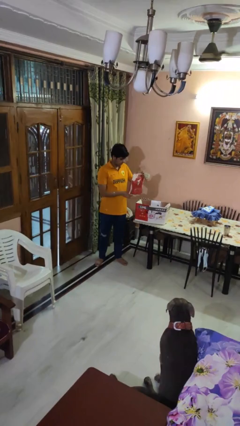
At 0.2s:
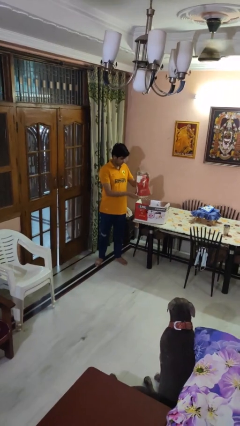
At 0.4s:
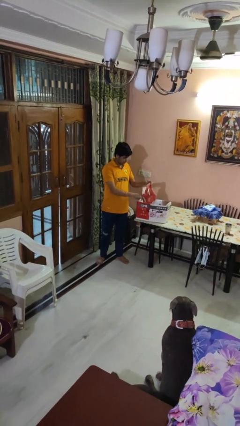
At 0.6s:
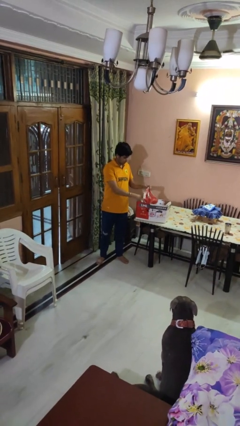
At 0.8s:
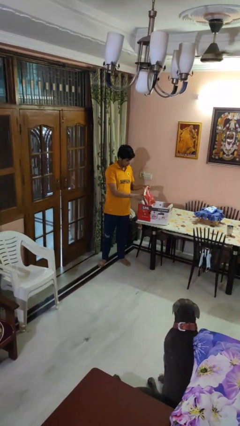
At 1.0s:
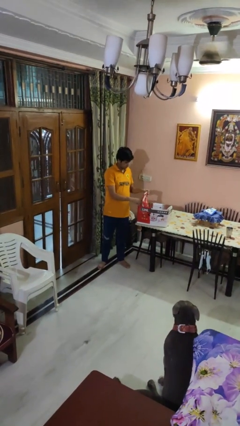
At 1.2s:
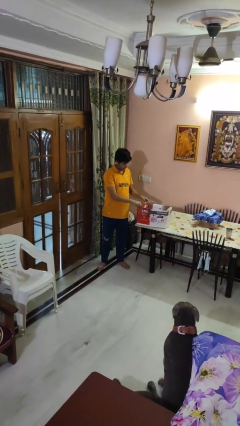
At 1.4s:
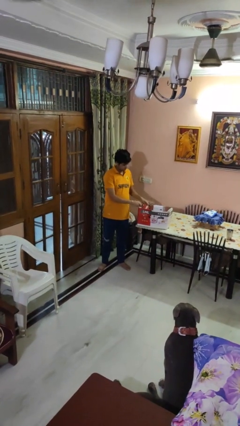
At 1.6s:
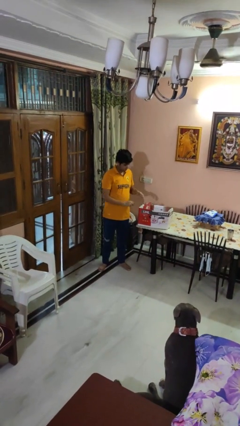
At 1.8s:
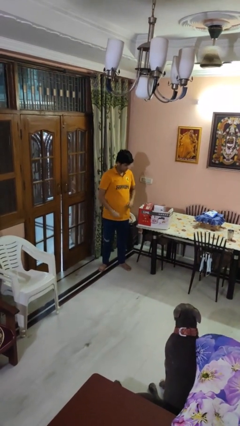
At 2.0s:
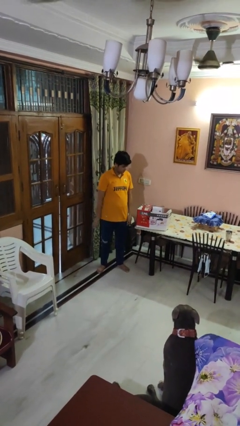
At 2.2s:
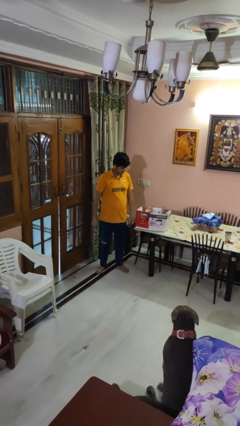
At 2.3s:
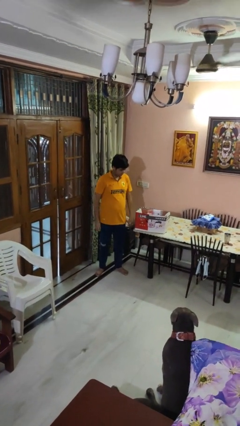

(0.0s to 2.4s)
person puts object into box

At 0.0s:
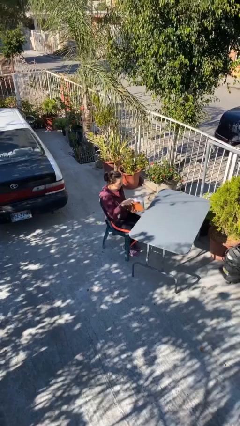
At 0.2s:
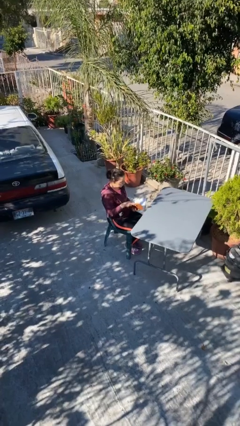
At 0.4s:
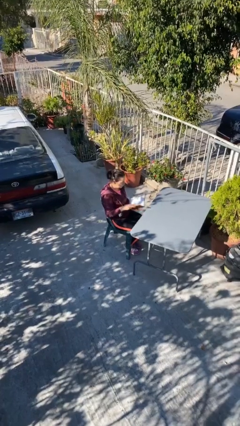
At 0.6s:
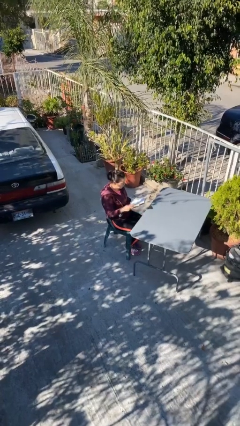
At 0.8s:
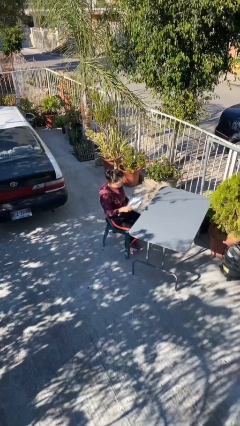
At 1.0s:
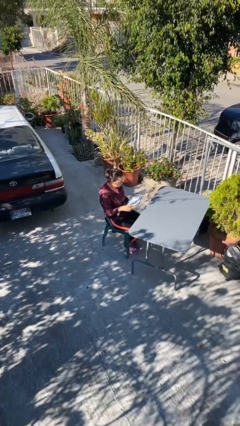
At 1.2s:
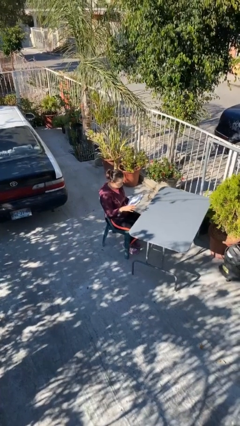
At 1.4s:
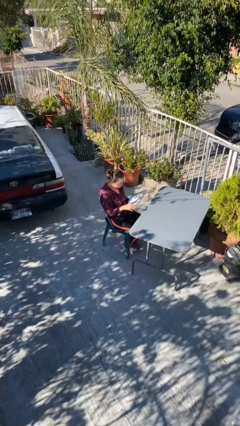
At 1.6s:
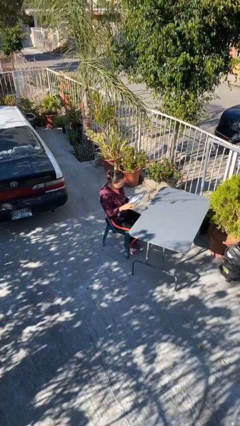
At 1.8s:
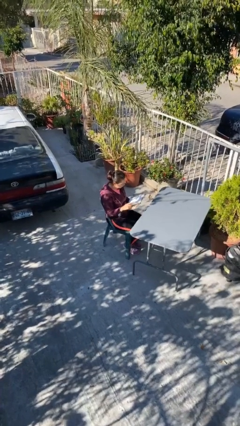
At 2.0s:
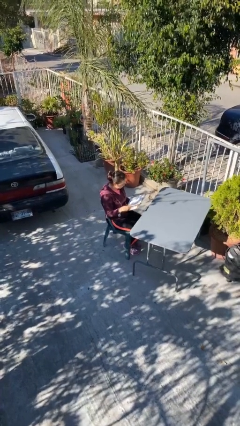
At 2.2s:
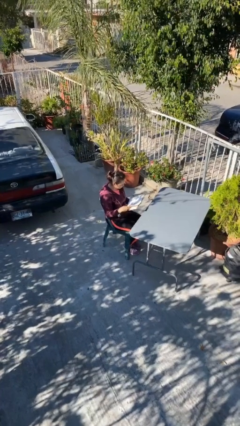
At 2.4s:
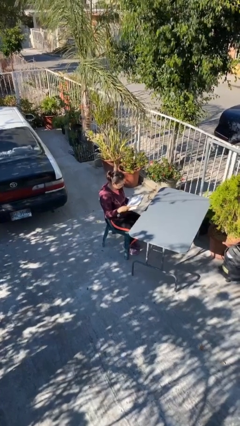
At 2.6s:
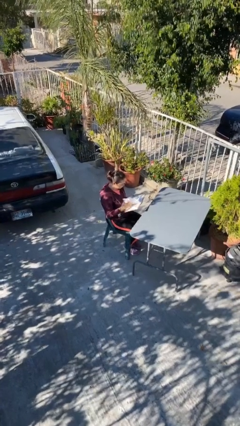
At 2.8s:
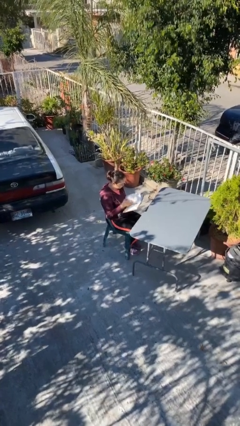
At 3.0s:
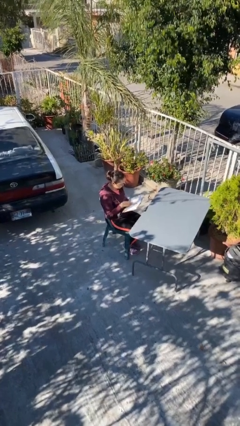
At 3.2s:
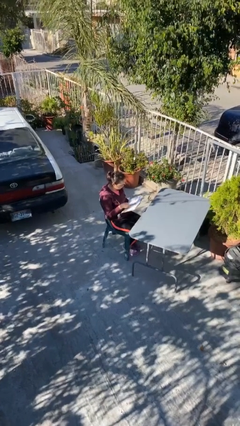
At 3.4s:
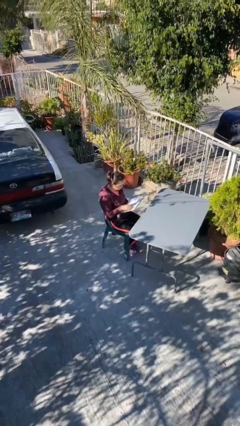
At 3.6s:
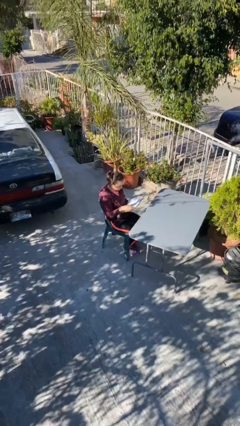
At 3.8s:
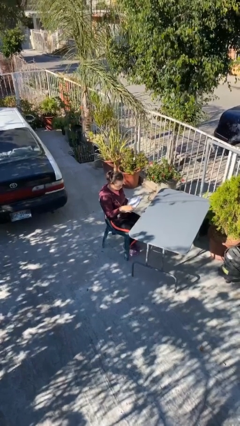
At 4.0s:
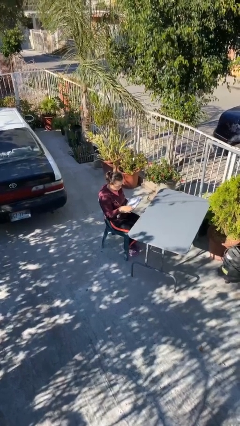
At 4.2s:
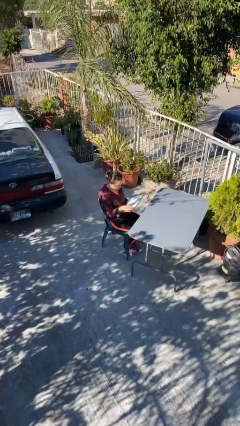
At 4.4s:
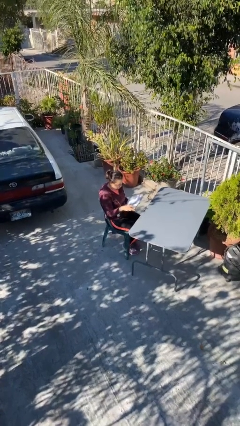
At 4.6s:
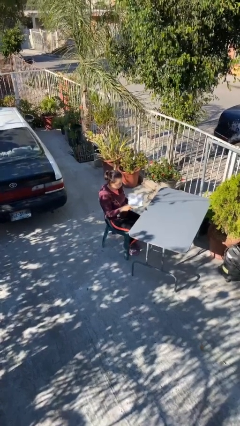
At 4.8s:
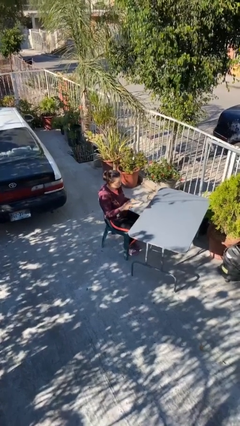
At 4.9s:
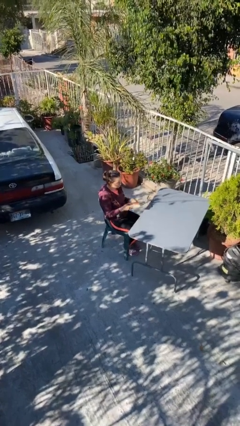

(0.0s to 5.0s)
person reads document

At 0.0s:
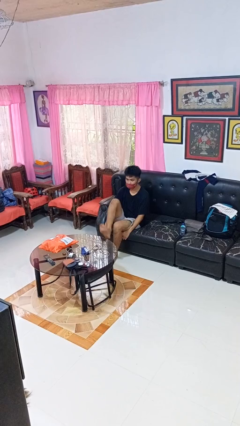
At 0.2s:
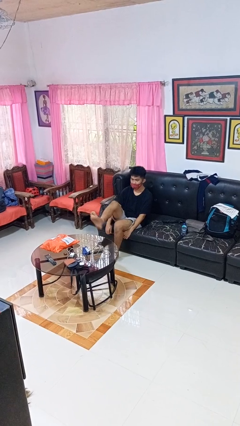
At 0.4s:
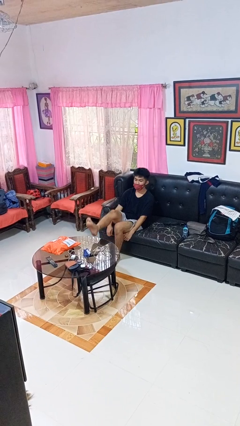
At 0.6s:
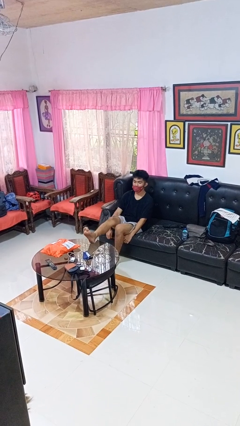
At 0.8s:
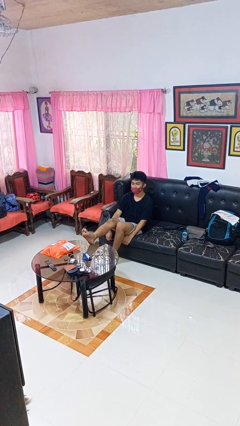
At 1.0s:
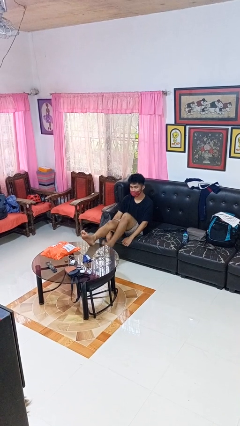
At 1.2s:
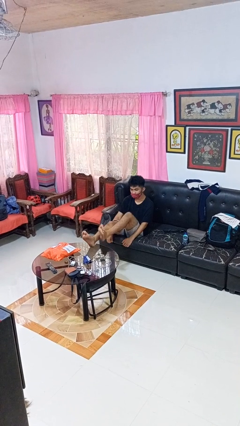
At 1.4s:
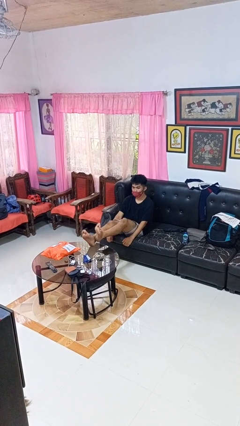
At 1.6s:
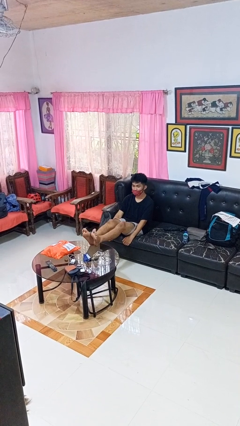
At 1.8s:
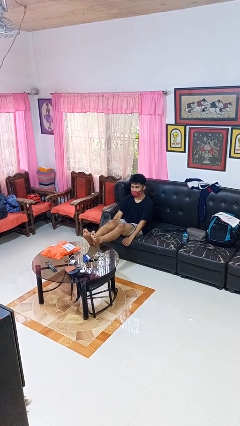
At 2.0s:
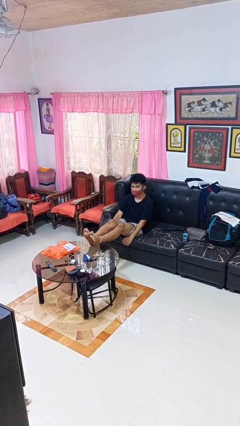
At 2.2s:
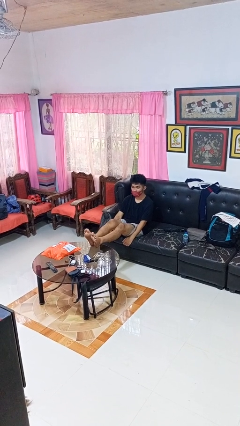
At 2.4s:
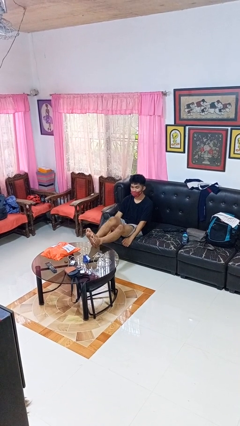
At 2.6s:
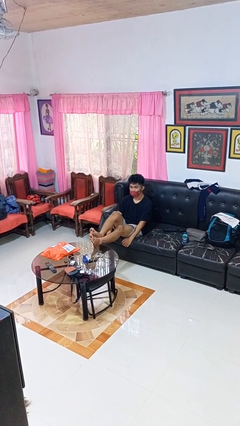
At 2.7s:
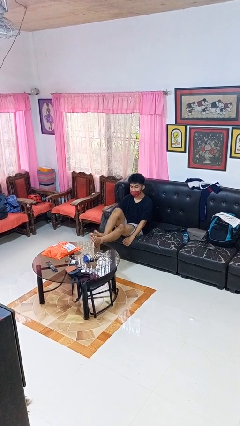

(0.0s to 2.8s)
person puts feet up

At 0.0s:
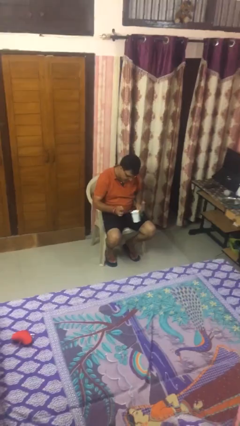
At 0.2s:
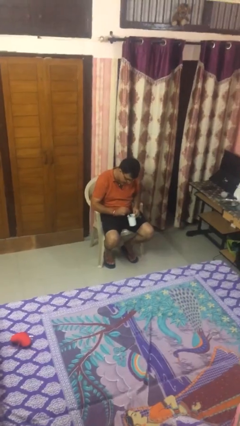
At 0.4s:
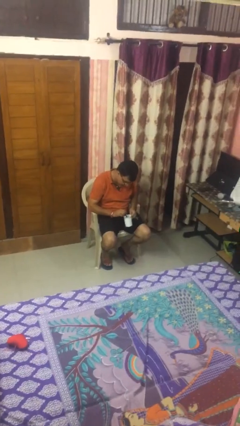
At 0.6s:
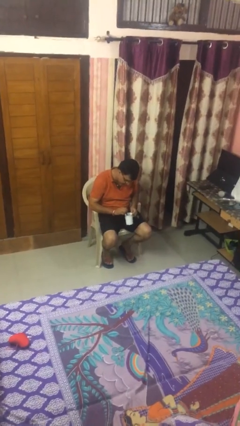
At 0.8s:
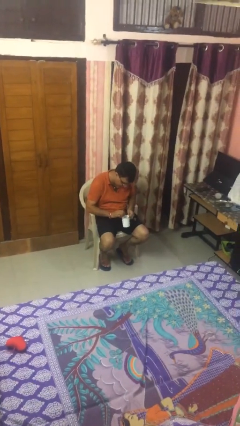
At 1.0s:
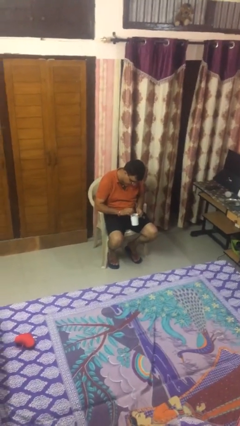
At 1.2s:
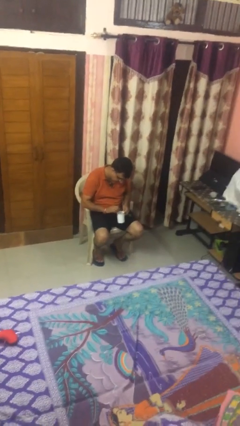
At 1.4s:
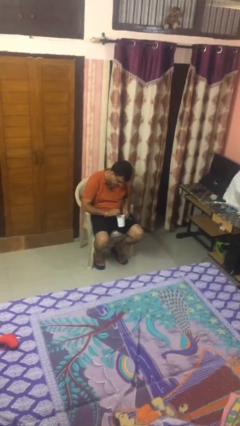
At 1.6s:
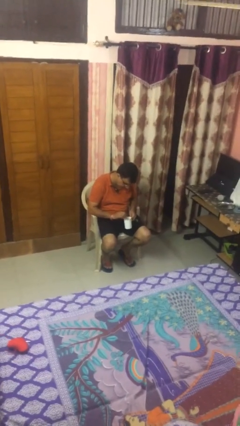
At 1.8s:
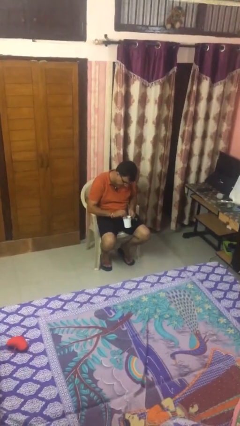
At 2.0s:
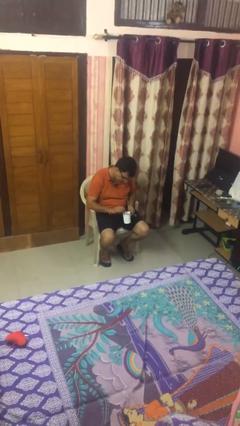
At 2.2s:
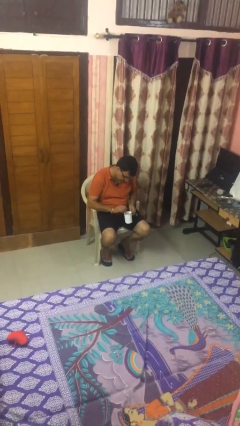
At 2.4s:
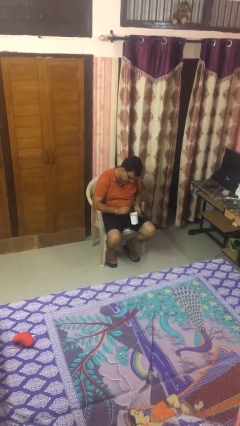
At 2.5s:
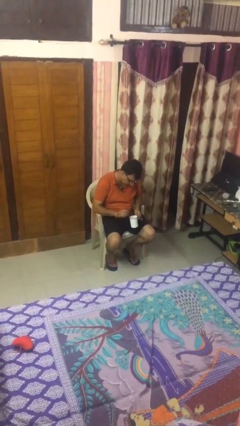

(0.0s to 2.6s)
person stirs mug

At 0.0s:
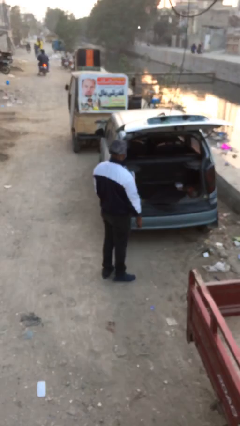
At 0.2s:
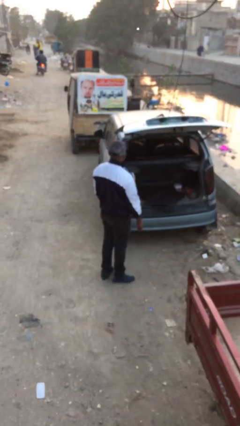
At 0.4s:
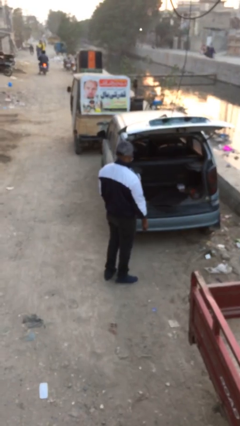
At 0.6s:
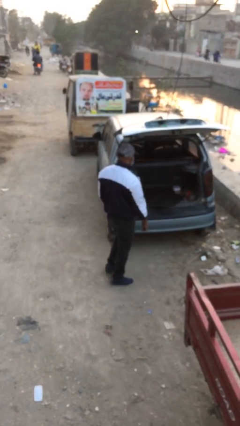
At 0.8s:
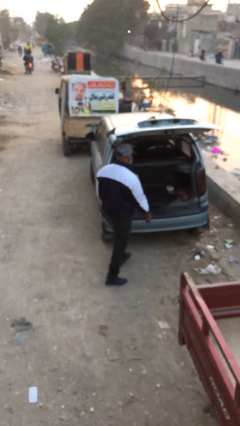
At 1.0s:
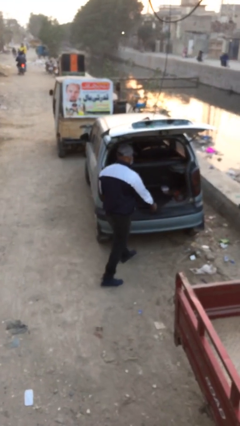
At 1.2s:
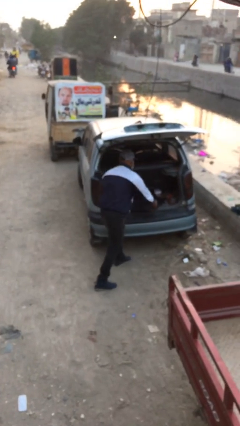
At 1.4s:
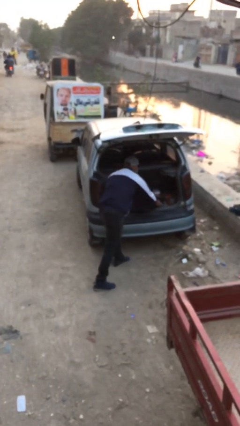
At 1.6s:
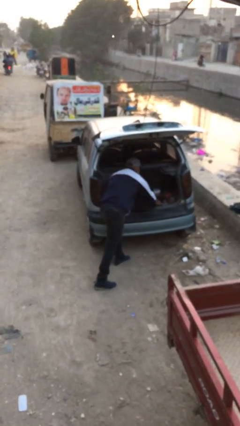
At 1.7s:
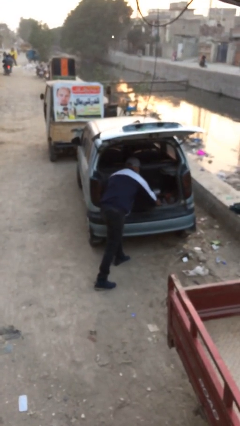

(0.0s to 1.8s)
person unloads car

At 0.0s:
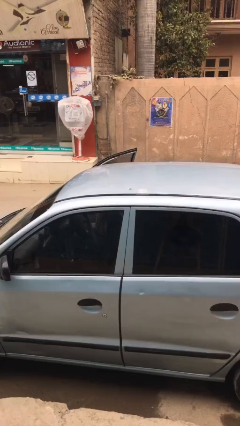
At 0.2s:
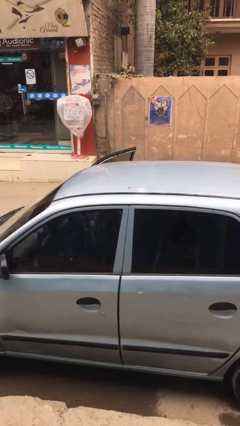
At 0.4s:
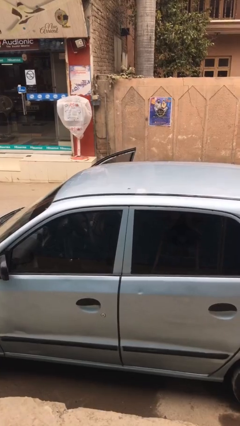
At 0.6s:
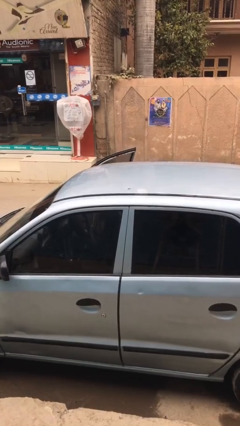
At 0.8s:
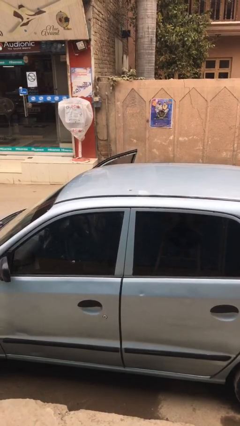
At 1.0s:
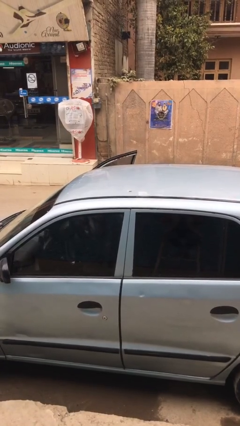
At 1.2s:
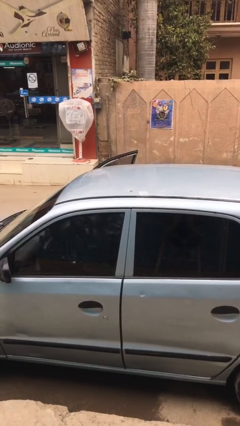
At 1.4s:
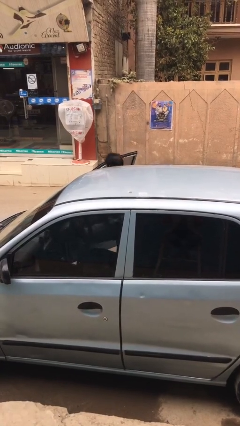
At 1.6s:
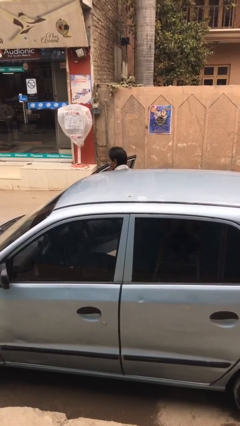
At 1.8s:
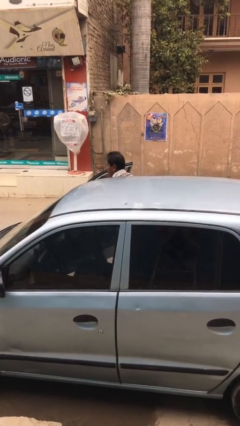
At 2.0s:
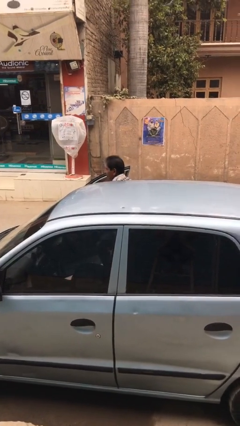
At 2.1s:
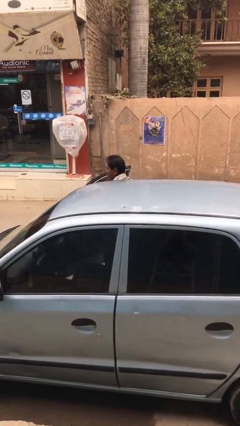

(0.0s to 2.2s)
person exits car

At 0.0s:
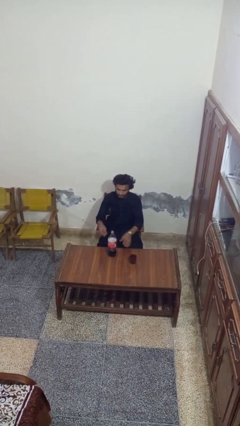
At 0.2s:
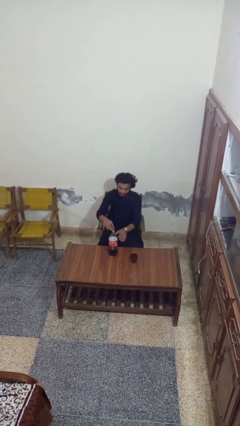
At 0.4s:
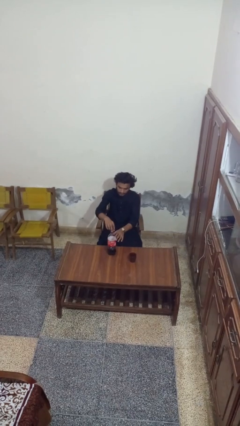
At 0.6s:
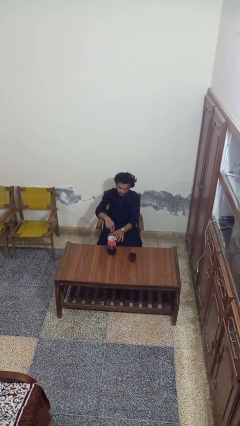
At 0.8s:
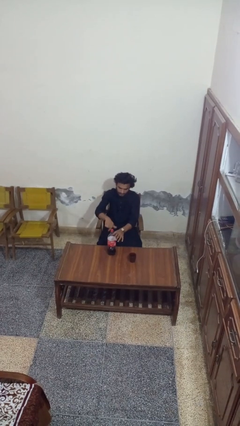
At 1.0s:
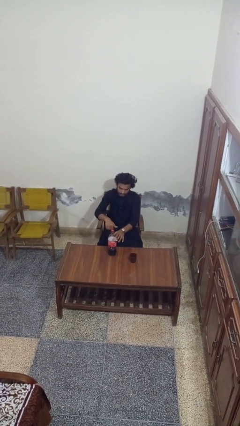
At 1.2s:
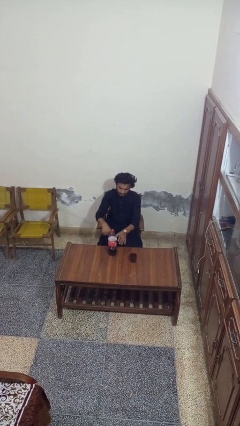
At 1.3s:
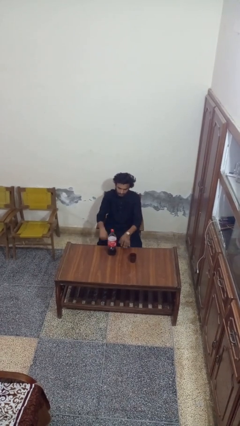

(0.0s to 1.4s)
person screws lid to bottle
